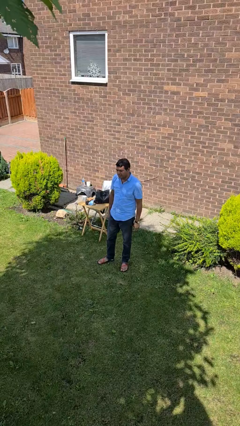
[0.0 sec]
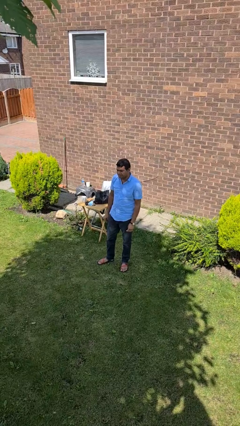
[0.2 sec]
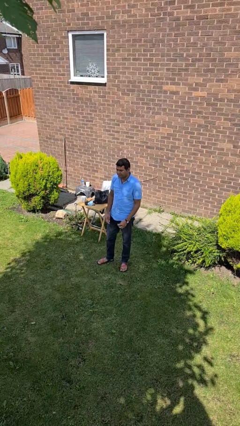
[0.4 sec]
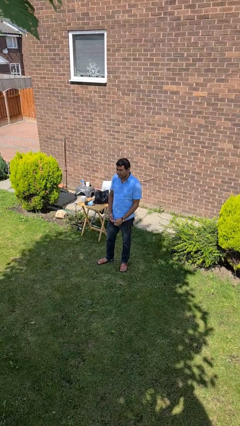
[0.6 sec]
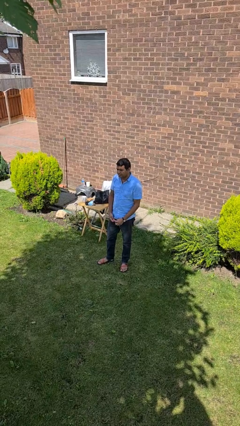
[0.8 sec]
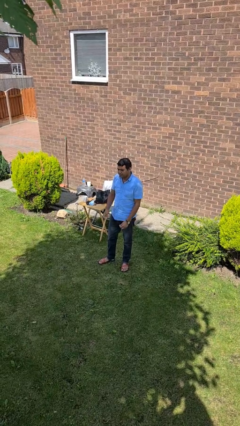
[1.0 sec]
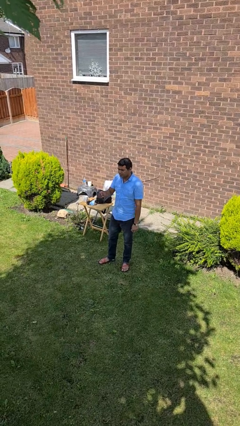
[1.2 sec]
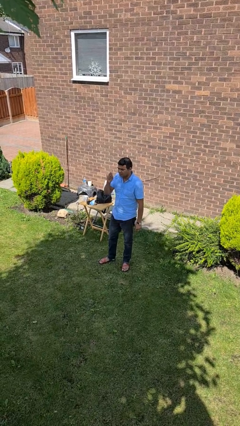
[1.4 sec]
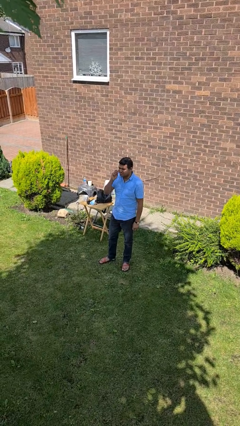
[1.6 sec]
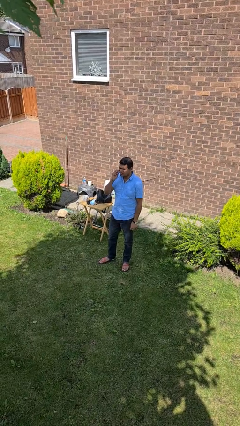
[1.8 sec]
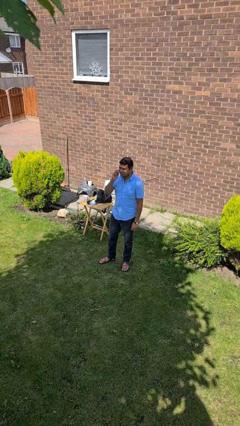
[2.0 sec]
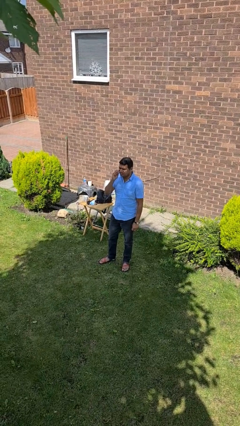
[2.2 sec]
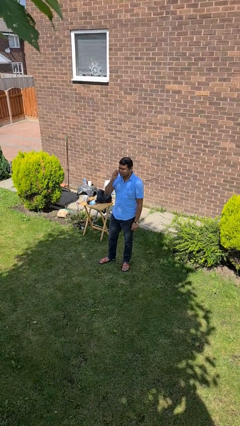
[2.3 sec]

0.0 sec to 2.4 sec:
person flosses

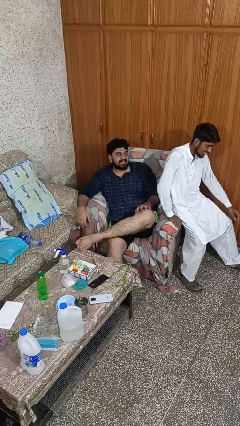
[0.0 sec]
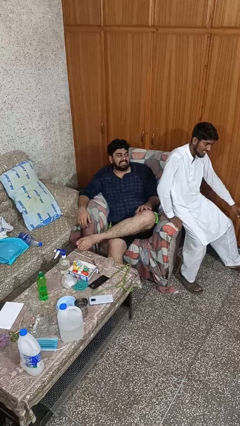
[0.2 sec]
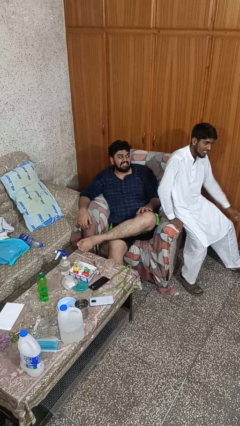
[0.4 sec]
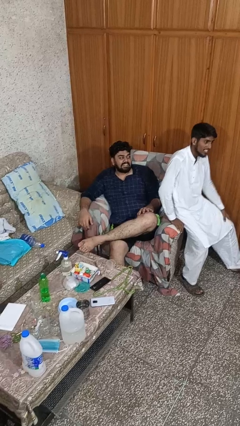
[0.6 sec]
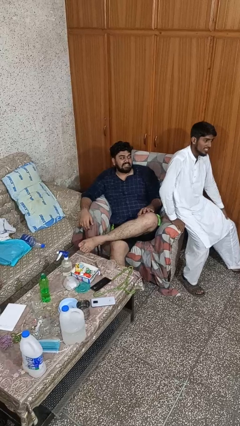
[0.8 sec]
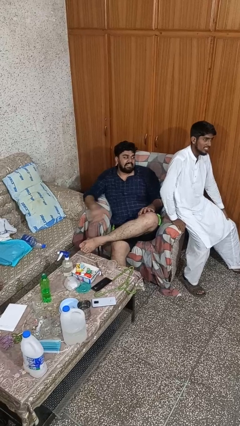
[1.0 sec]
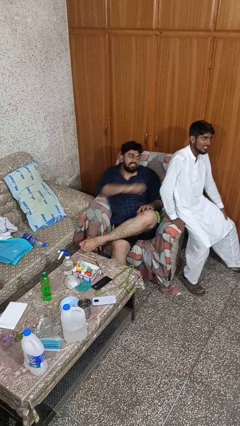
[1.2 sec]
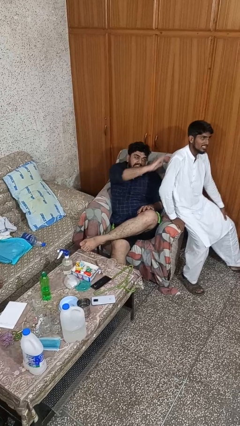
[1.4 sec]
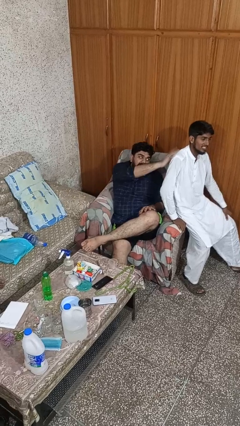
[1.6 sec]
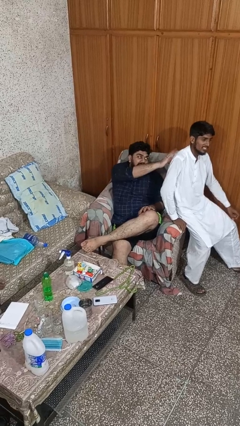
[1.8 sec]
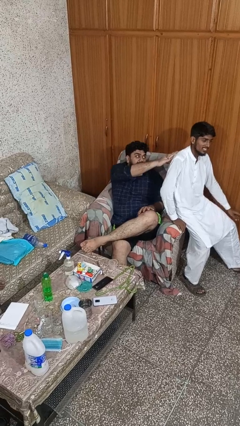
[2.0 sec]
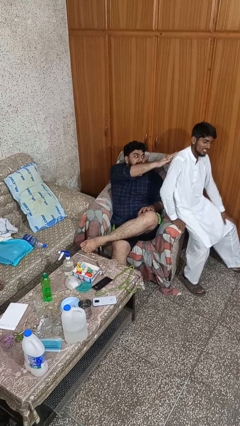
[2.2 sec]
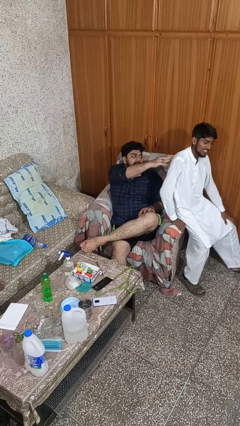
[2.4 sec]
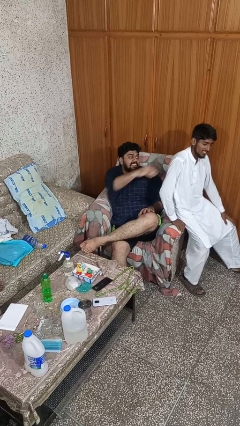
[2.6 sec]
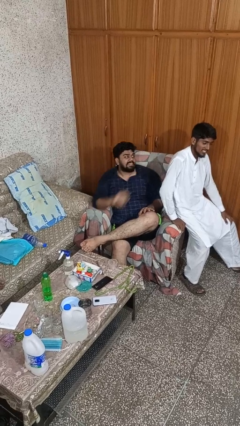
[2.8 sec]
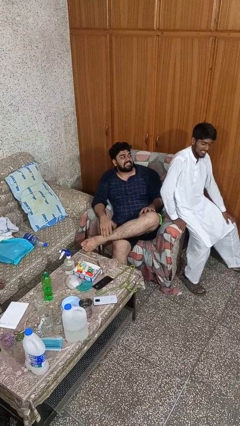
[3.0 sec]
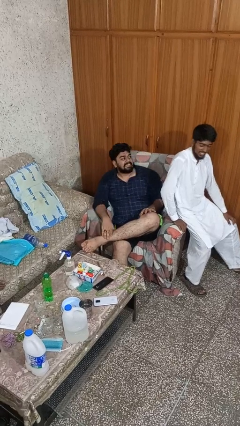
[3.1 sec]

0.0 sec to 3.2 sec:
person pounds shoulders of person

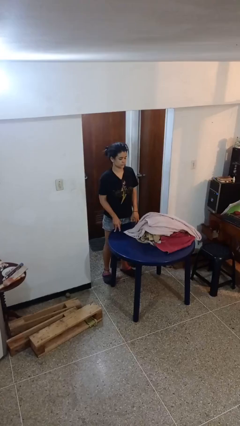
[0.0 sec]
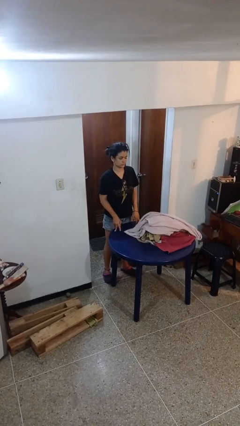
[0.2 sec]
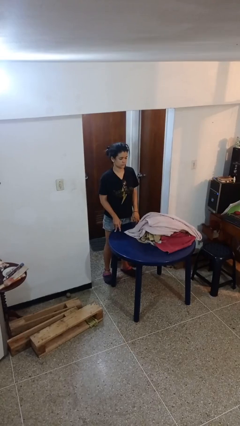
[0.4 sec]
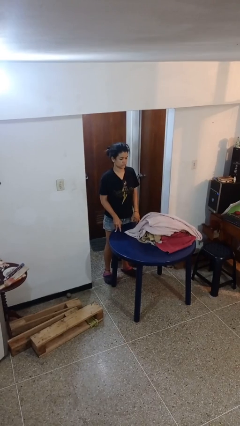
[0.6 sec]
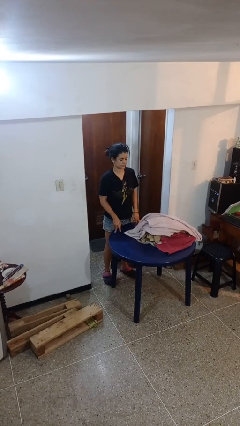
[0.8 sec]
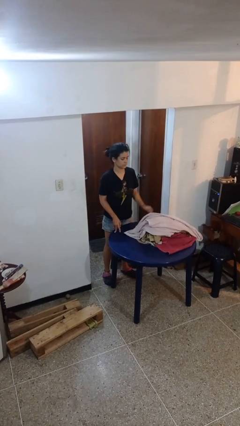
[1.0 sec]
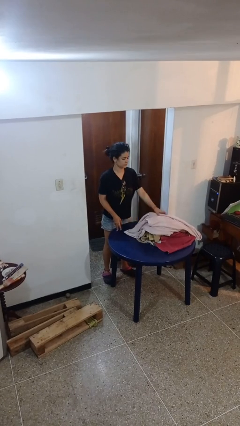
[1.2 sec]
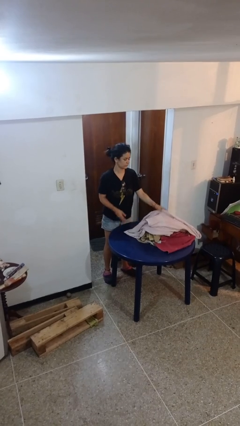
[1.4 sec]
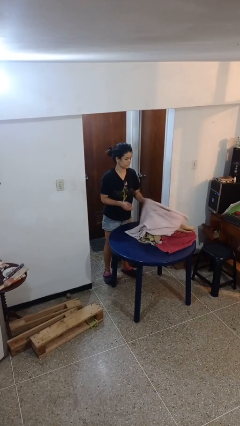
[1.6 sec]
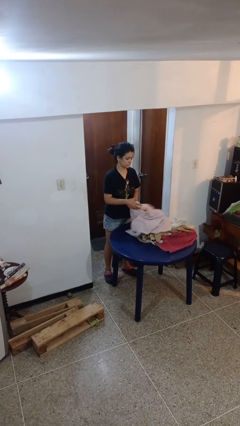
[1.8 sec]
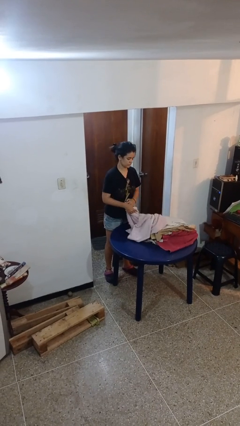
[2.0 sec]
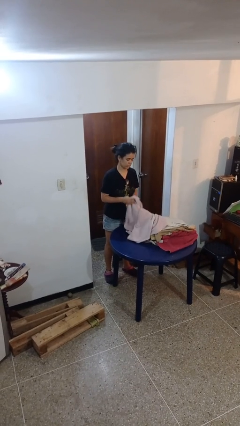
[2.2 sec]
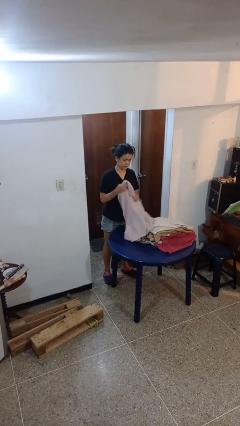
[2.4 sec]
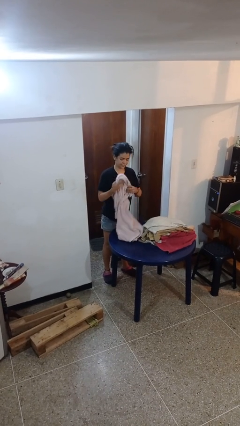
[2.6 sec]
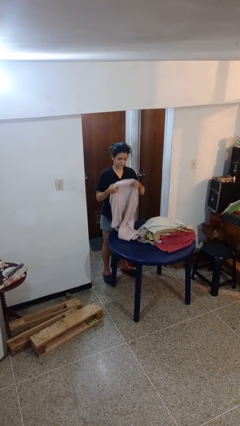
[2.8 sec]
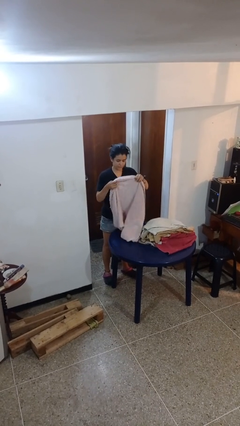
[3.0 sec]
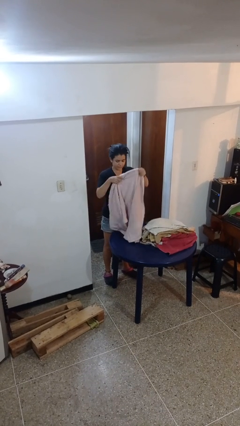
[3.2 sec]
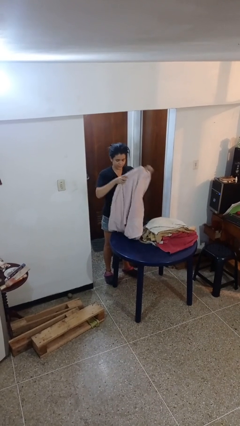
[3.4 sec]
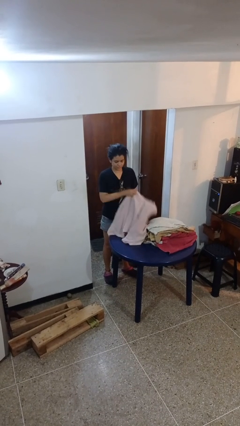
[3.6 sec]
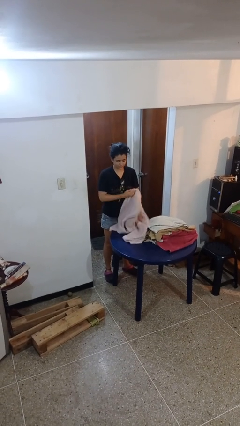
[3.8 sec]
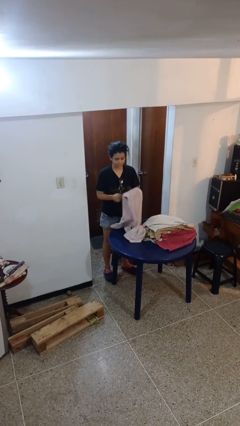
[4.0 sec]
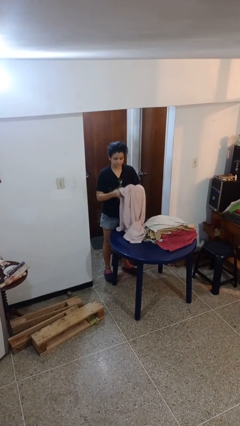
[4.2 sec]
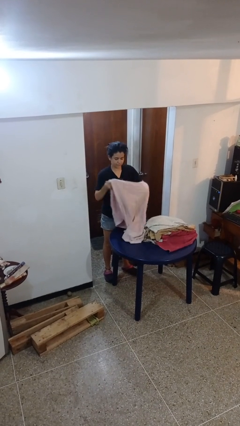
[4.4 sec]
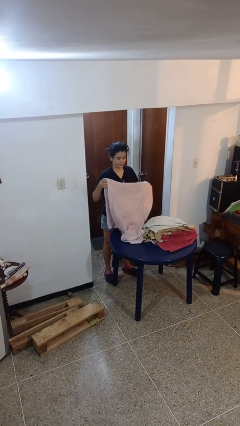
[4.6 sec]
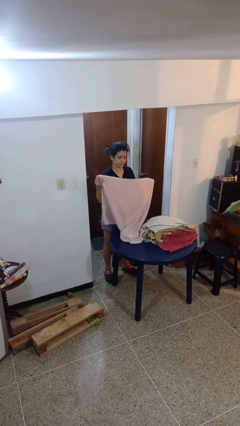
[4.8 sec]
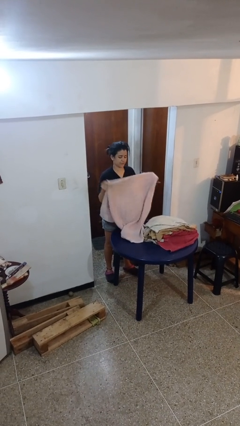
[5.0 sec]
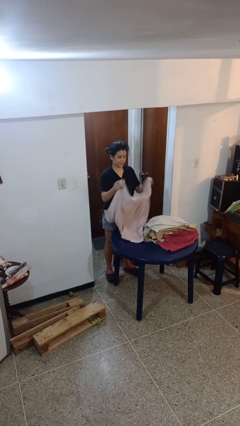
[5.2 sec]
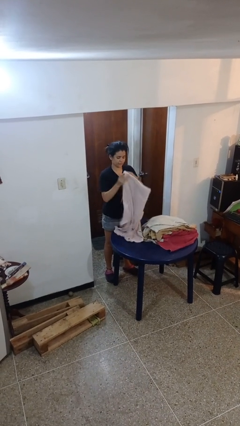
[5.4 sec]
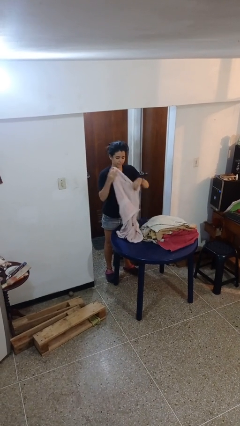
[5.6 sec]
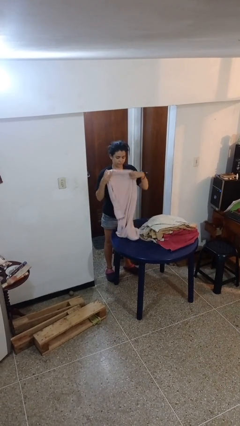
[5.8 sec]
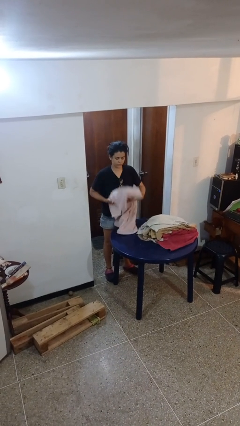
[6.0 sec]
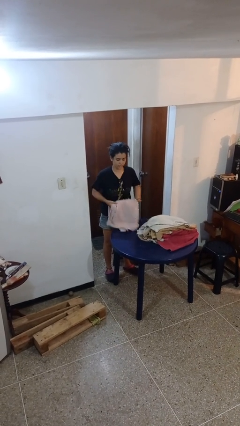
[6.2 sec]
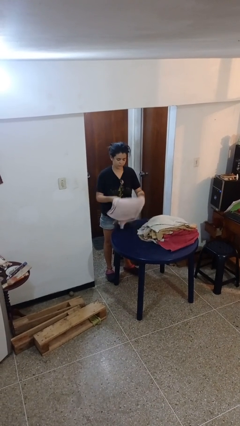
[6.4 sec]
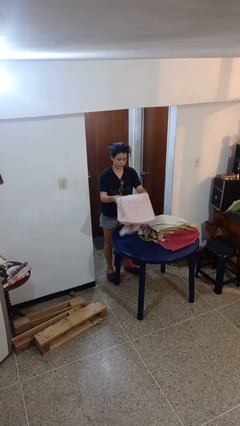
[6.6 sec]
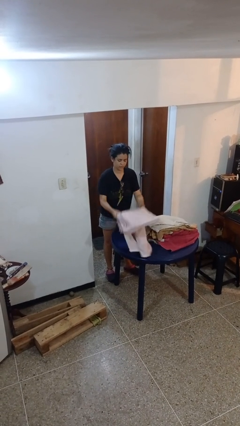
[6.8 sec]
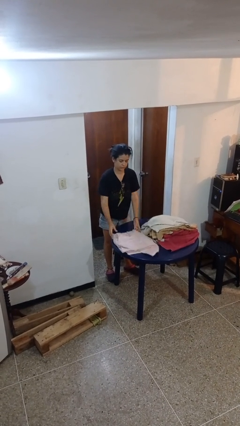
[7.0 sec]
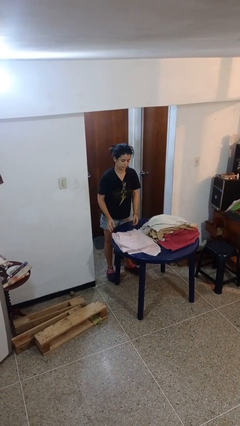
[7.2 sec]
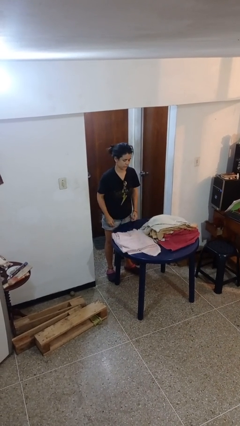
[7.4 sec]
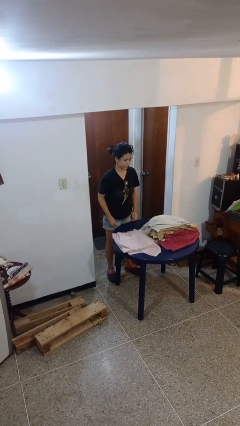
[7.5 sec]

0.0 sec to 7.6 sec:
person folds towel

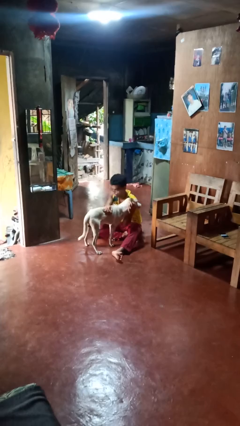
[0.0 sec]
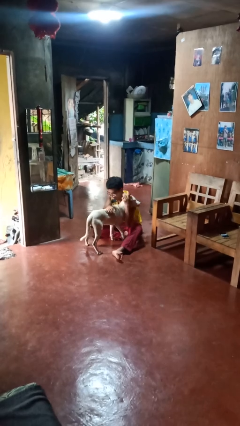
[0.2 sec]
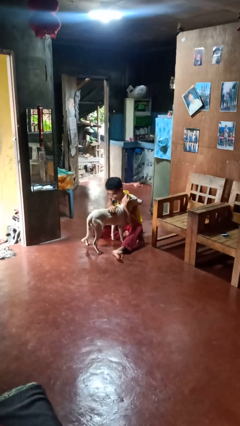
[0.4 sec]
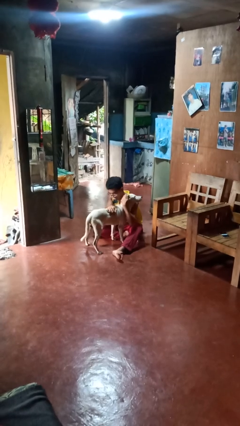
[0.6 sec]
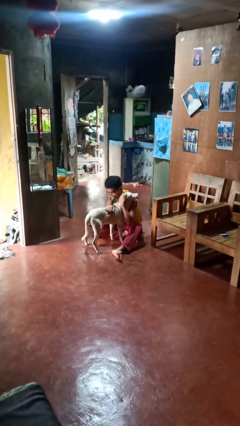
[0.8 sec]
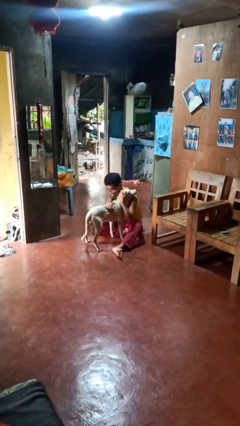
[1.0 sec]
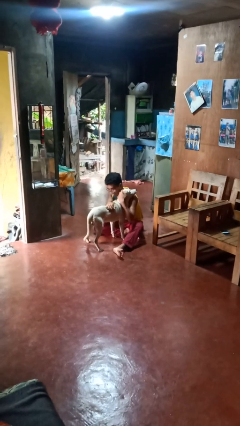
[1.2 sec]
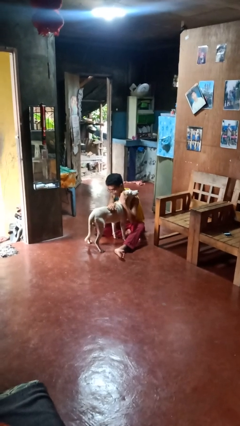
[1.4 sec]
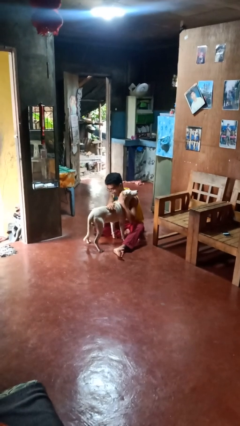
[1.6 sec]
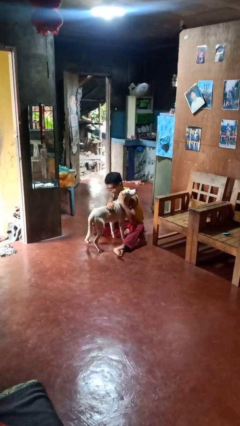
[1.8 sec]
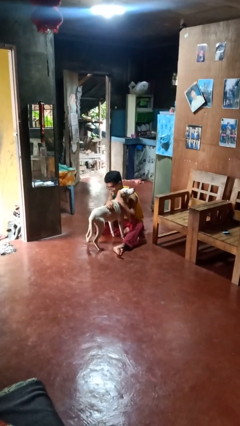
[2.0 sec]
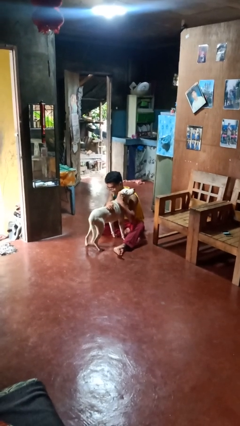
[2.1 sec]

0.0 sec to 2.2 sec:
person hugs dog

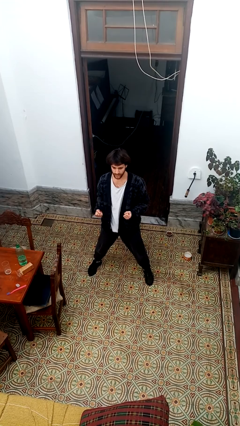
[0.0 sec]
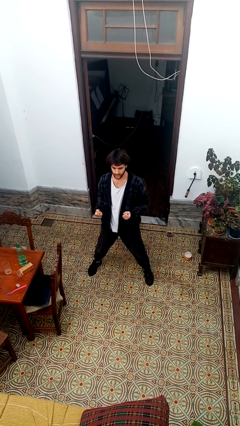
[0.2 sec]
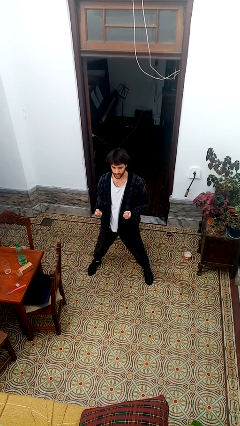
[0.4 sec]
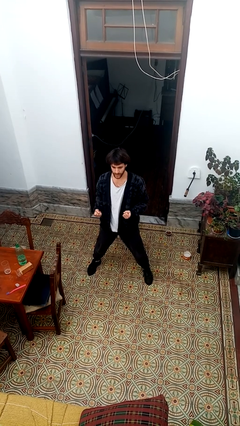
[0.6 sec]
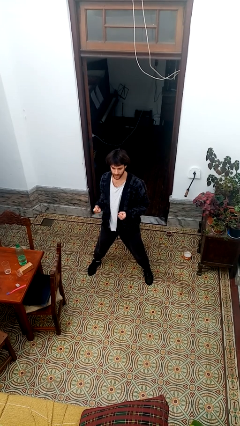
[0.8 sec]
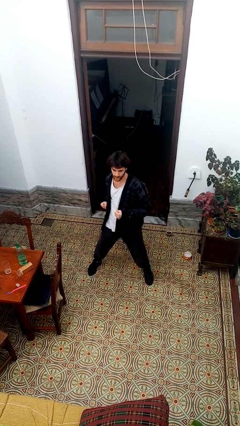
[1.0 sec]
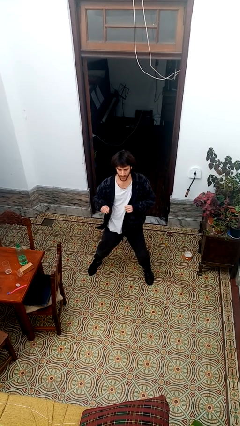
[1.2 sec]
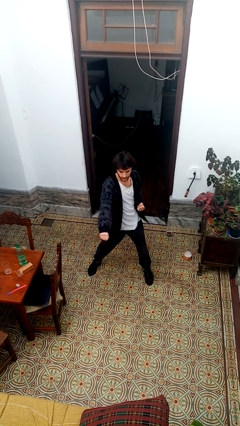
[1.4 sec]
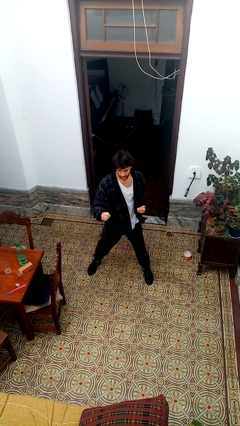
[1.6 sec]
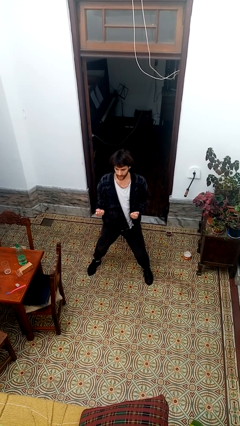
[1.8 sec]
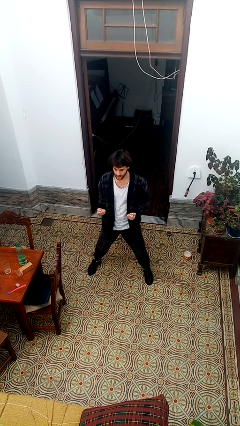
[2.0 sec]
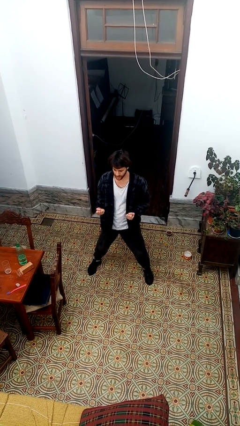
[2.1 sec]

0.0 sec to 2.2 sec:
person punches
